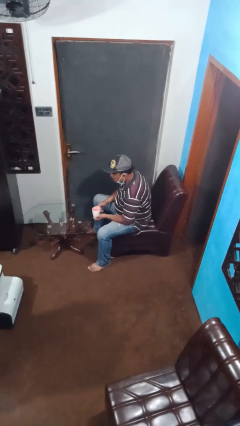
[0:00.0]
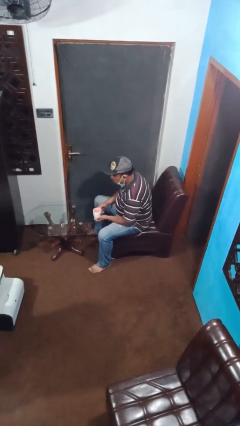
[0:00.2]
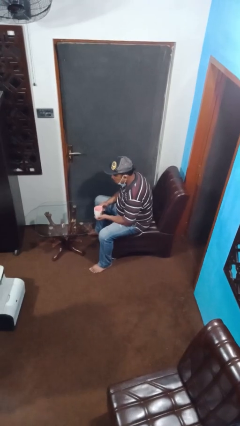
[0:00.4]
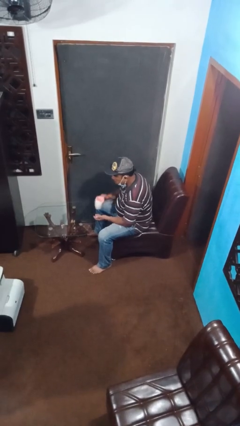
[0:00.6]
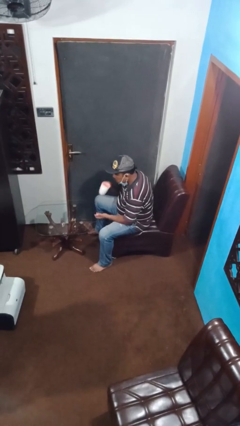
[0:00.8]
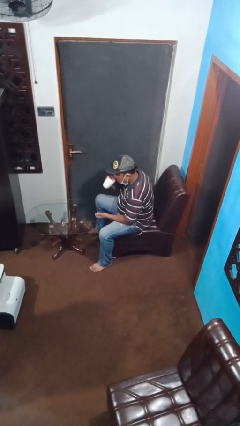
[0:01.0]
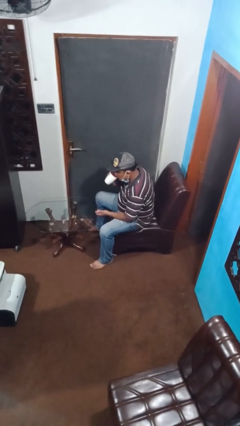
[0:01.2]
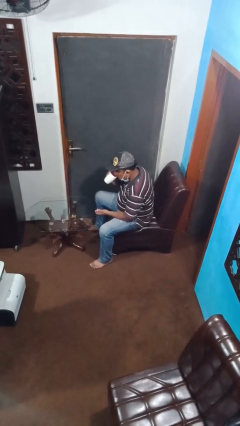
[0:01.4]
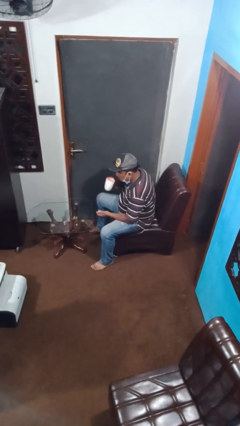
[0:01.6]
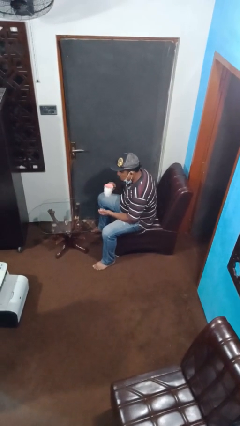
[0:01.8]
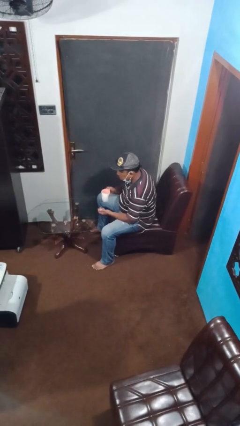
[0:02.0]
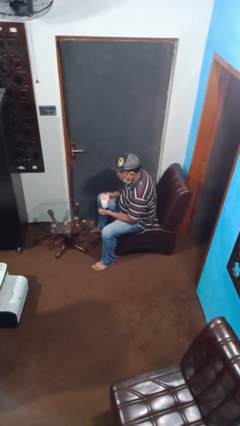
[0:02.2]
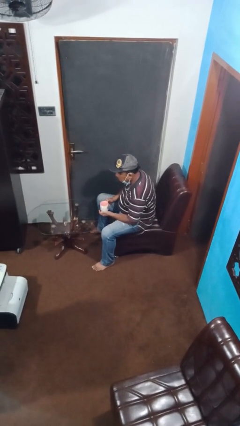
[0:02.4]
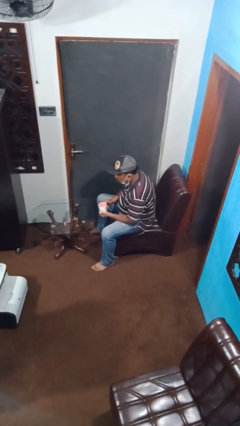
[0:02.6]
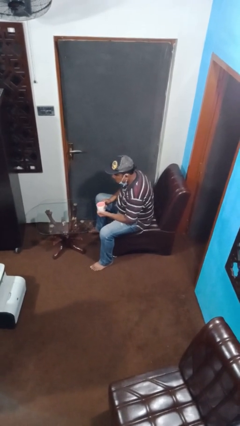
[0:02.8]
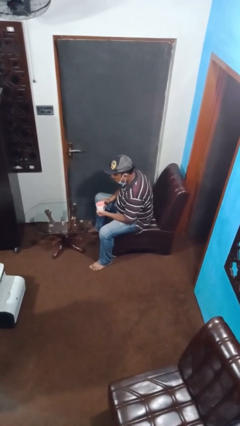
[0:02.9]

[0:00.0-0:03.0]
person drinks from mug

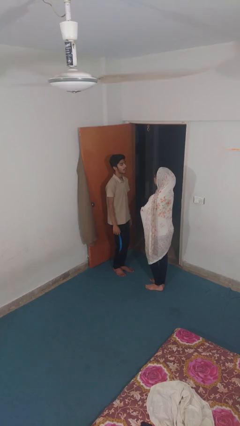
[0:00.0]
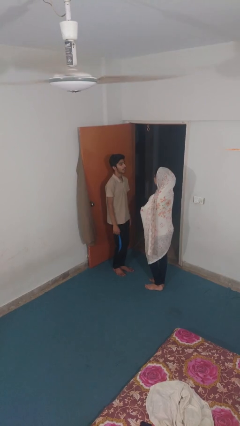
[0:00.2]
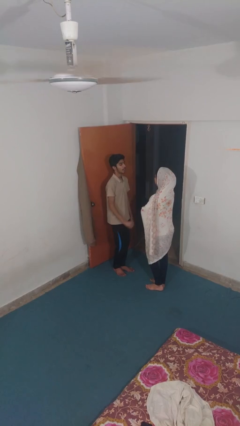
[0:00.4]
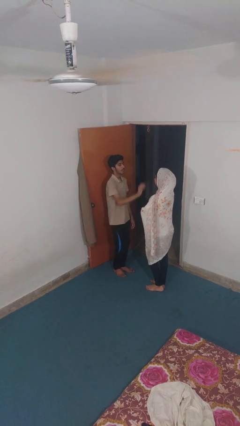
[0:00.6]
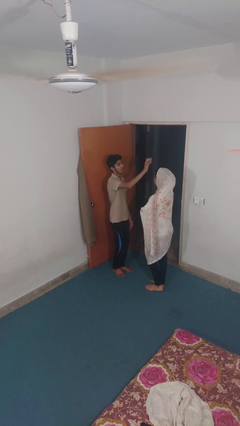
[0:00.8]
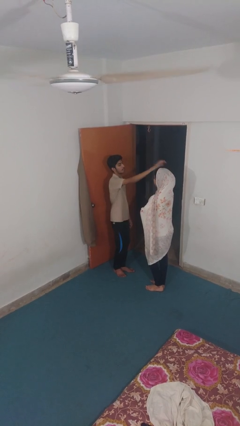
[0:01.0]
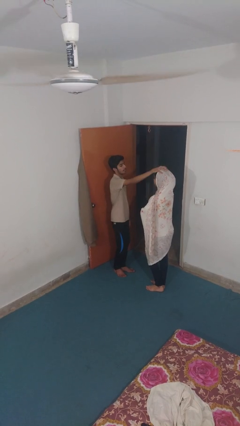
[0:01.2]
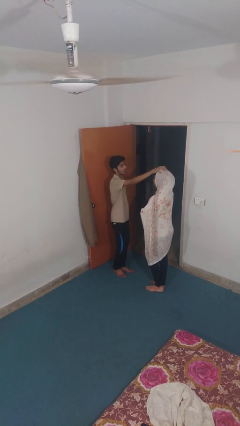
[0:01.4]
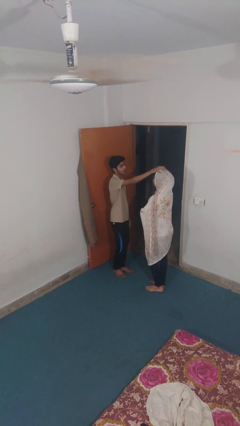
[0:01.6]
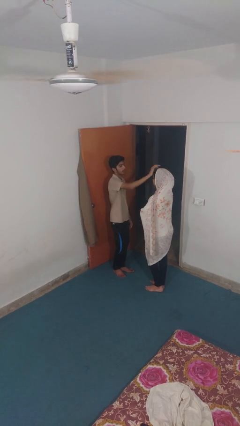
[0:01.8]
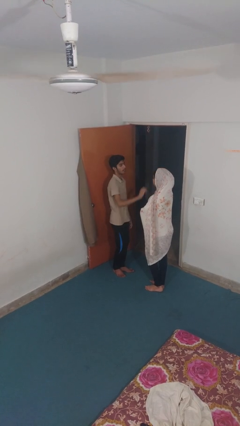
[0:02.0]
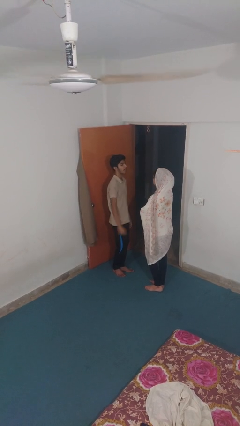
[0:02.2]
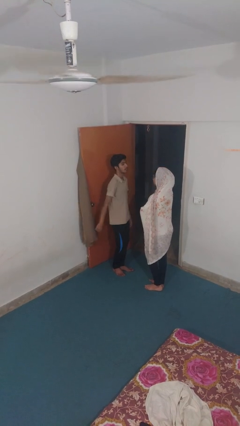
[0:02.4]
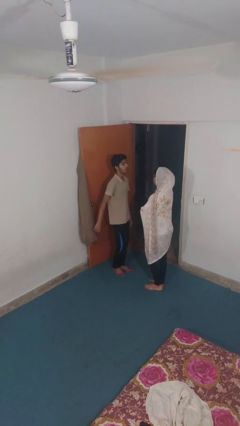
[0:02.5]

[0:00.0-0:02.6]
person grabs person by hair

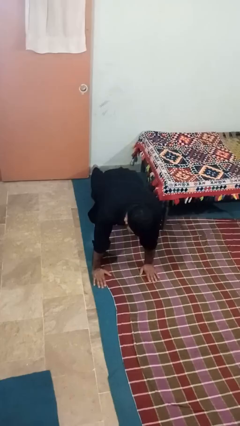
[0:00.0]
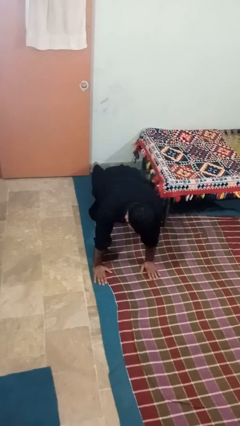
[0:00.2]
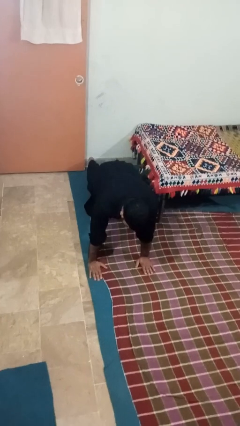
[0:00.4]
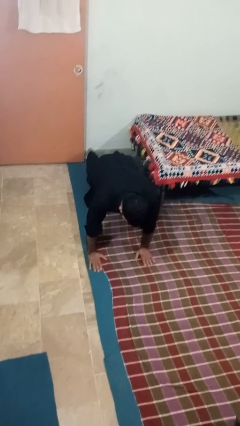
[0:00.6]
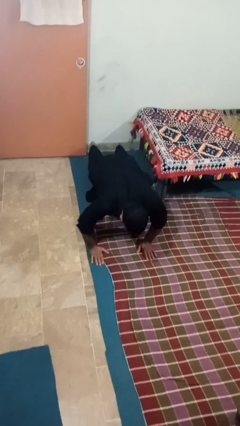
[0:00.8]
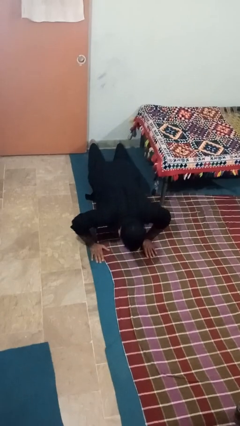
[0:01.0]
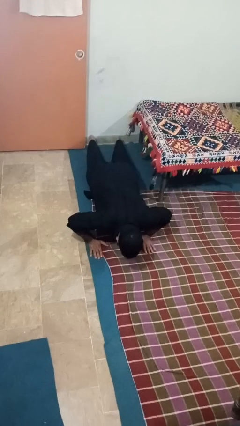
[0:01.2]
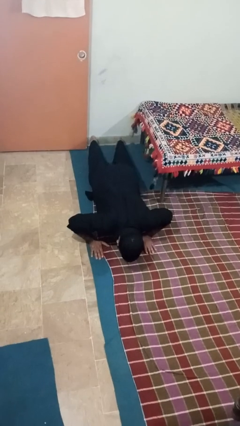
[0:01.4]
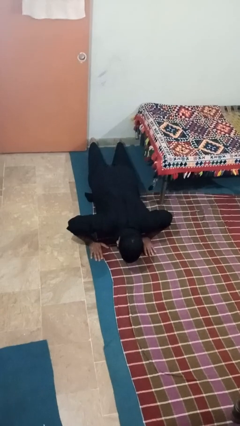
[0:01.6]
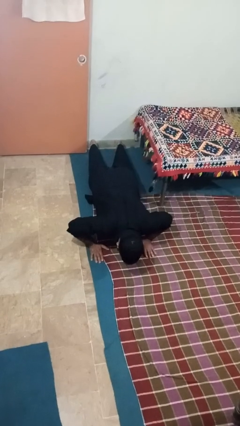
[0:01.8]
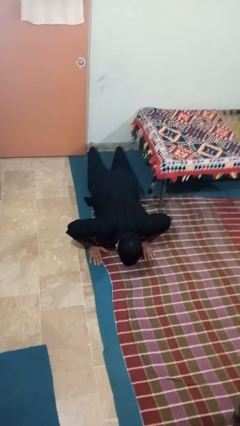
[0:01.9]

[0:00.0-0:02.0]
person exercises with pushup

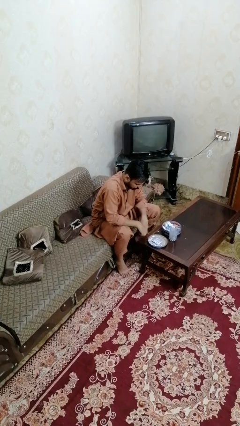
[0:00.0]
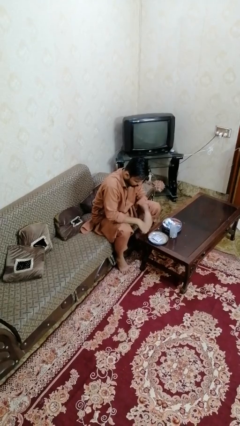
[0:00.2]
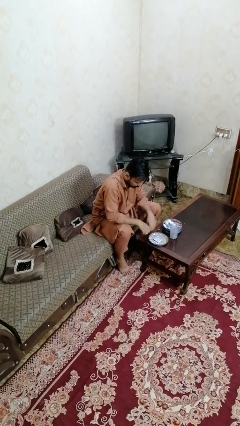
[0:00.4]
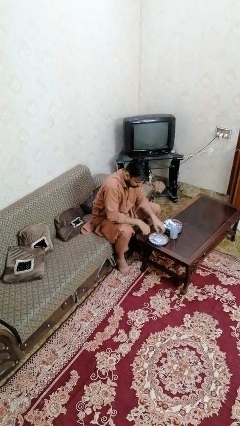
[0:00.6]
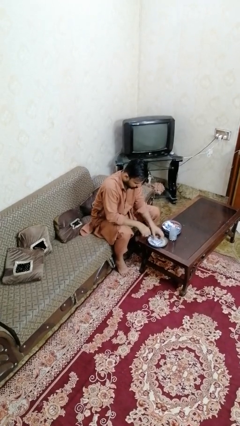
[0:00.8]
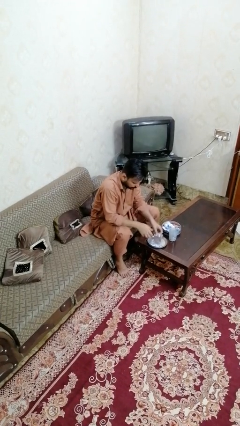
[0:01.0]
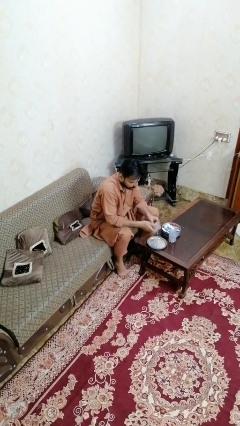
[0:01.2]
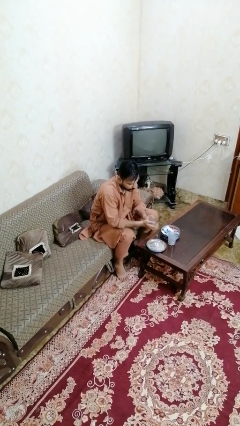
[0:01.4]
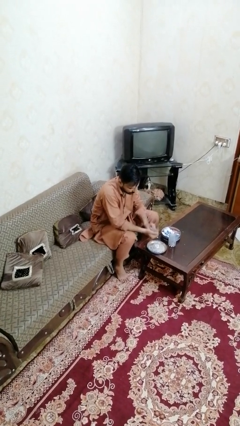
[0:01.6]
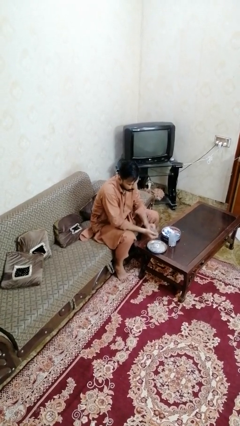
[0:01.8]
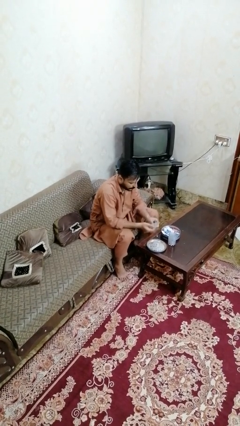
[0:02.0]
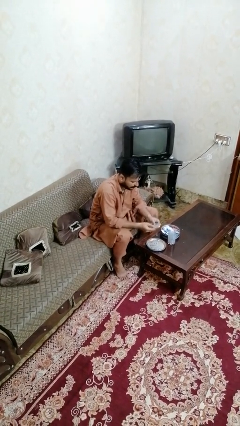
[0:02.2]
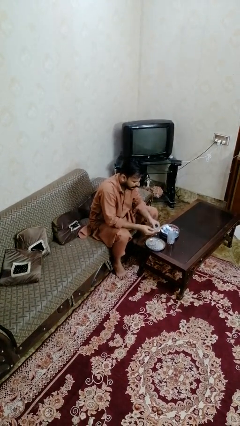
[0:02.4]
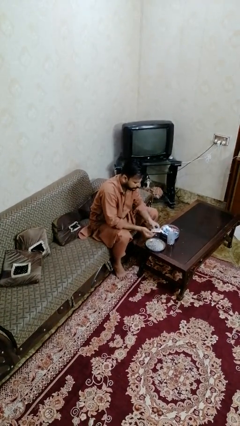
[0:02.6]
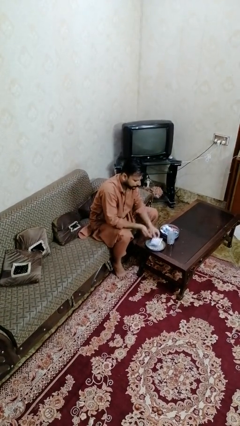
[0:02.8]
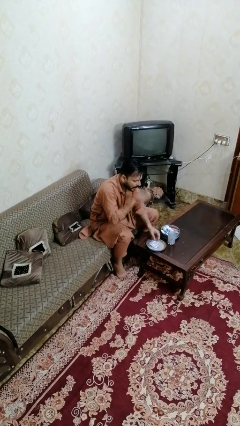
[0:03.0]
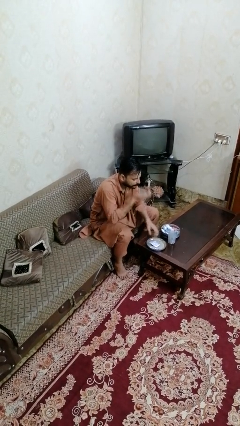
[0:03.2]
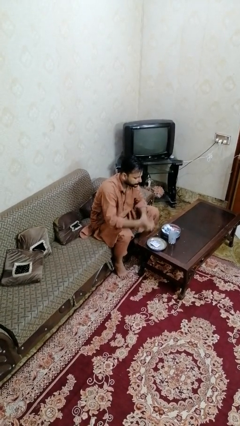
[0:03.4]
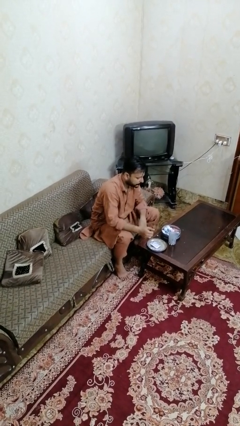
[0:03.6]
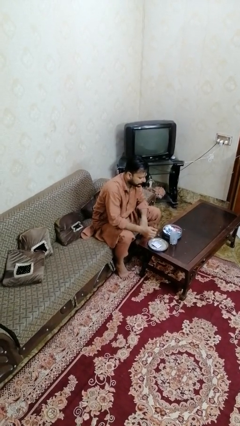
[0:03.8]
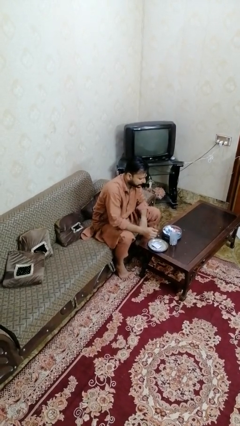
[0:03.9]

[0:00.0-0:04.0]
person takes medicine pills

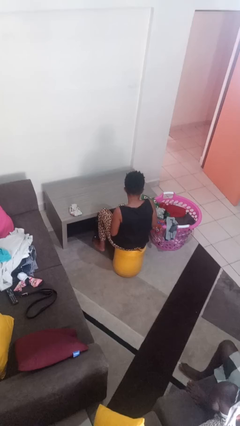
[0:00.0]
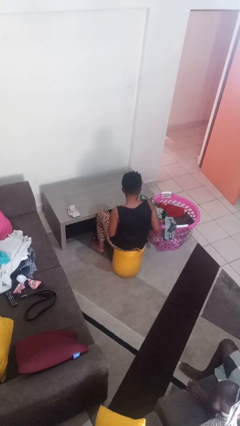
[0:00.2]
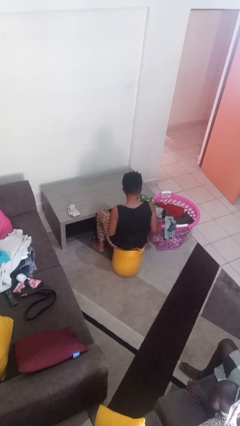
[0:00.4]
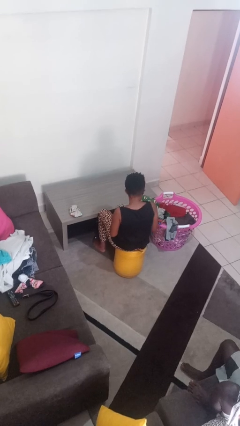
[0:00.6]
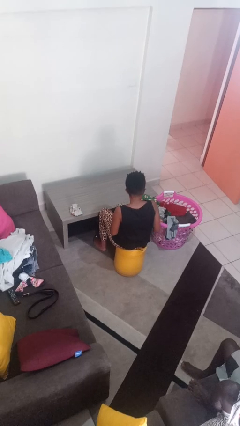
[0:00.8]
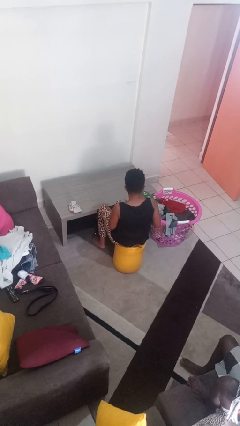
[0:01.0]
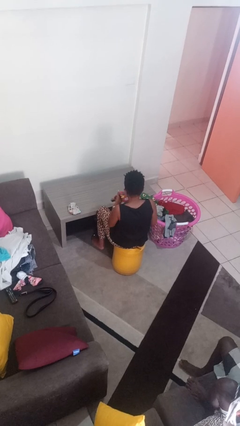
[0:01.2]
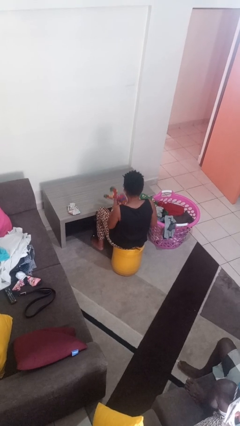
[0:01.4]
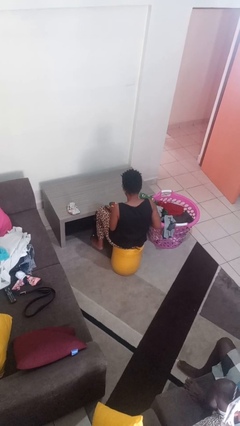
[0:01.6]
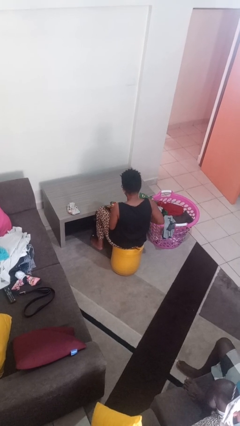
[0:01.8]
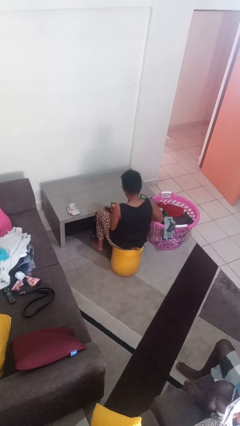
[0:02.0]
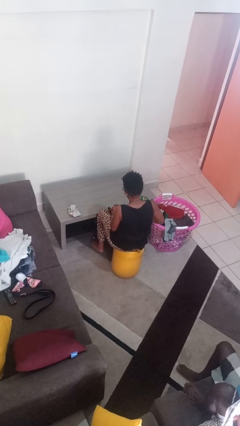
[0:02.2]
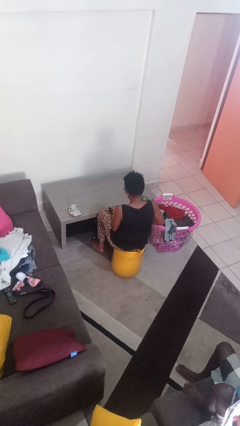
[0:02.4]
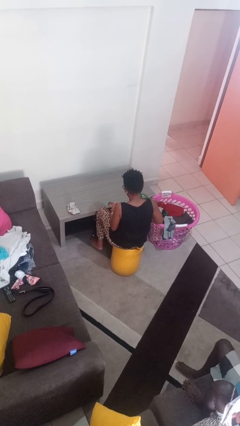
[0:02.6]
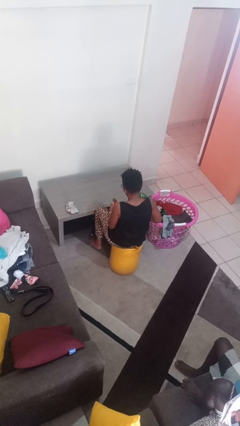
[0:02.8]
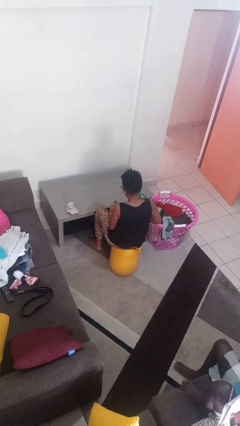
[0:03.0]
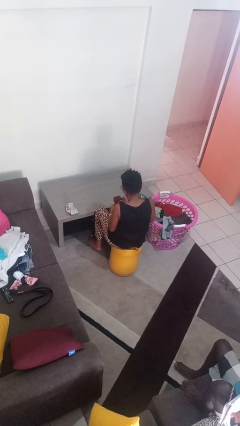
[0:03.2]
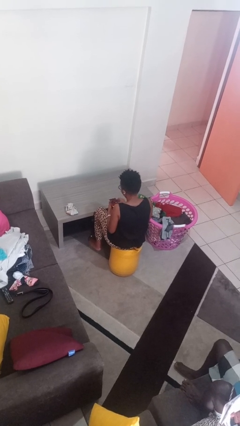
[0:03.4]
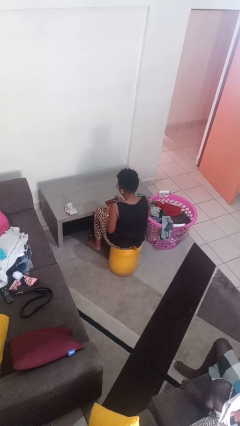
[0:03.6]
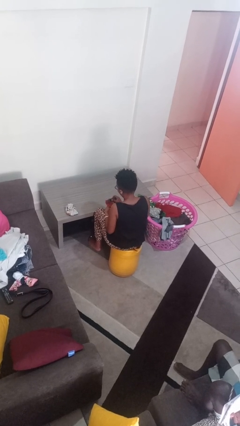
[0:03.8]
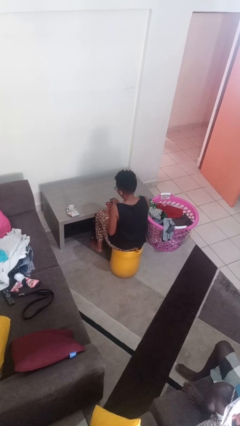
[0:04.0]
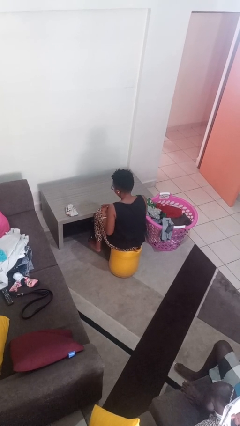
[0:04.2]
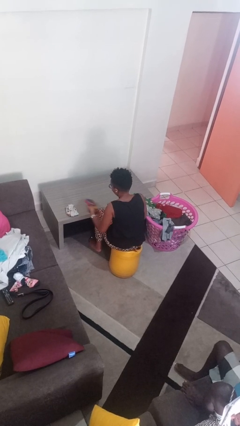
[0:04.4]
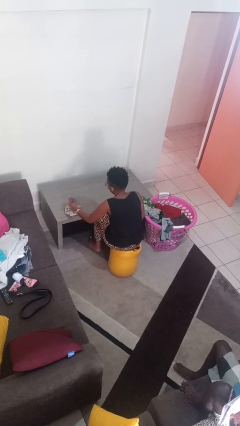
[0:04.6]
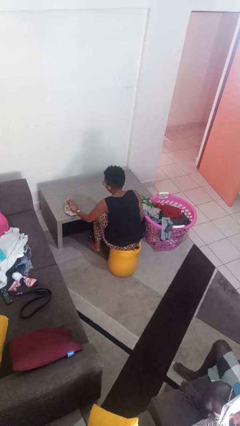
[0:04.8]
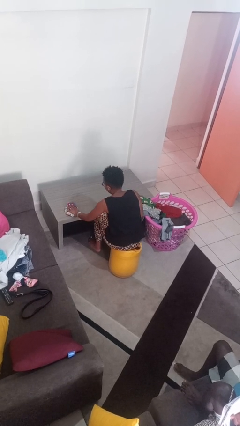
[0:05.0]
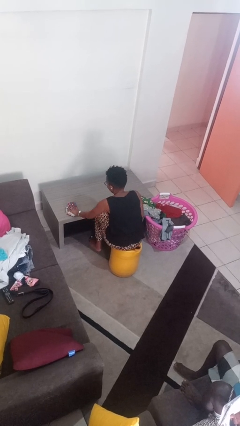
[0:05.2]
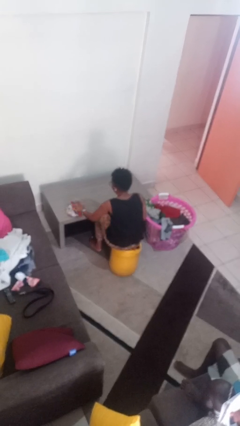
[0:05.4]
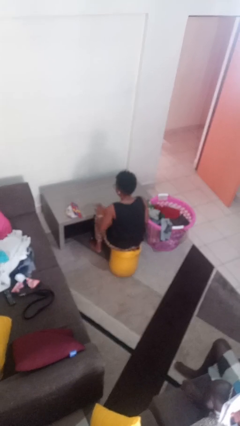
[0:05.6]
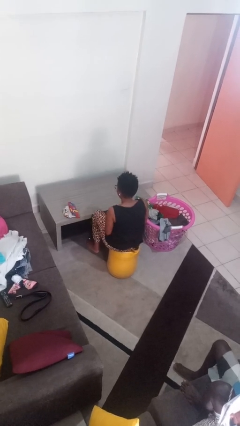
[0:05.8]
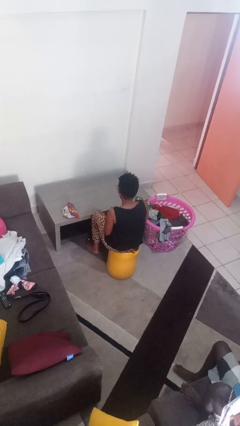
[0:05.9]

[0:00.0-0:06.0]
person folds socks

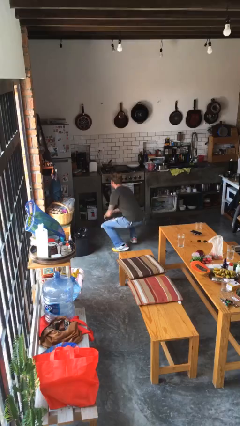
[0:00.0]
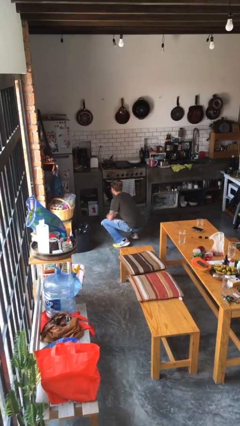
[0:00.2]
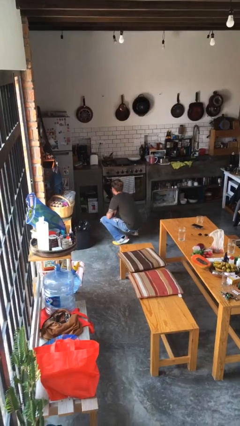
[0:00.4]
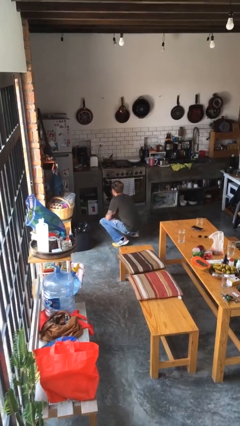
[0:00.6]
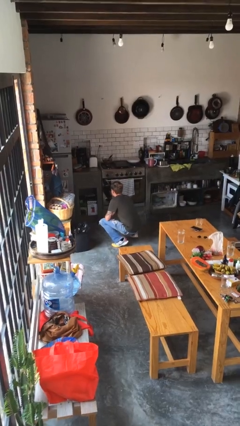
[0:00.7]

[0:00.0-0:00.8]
person squats
